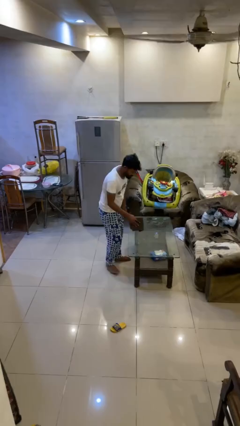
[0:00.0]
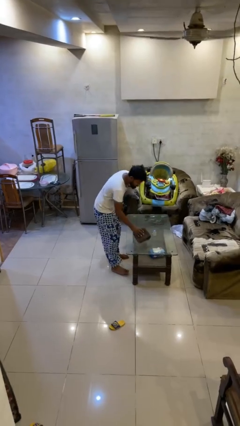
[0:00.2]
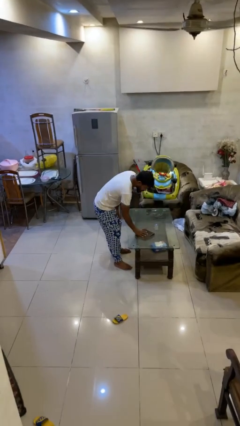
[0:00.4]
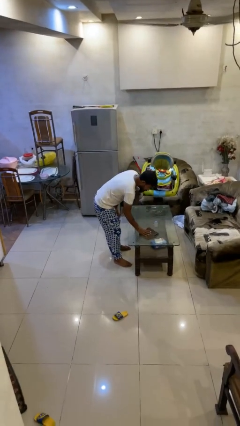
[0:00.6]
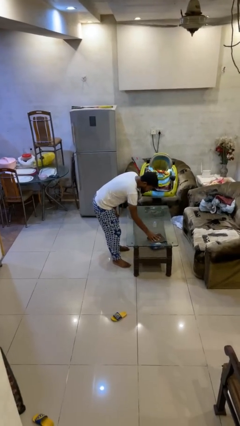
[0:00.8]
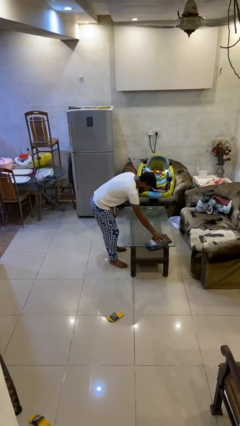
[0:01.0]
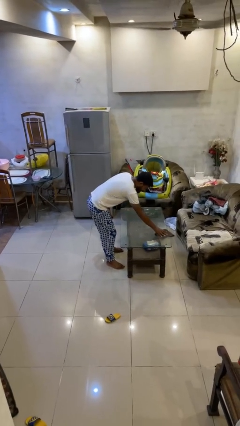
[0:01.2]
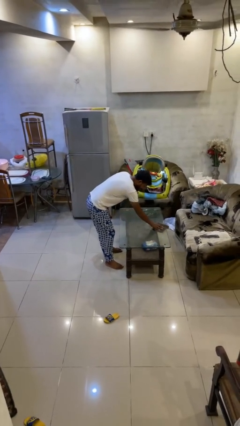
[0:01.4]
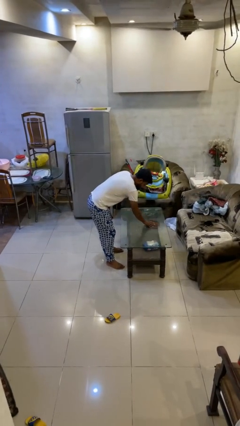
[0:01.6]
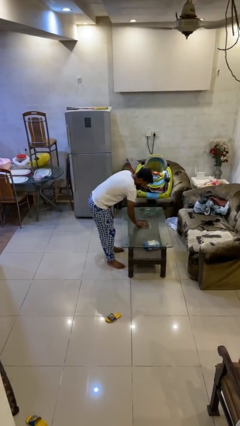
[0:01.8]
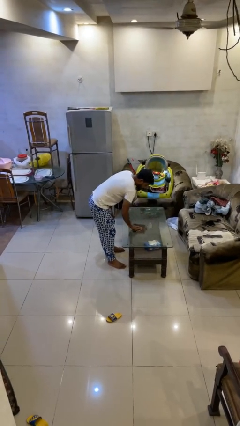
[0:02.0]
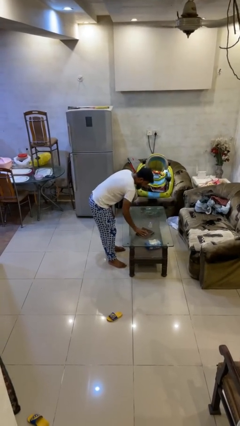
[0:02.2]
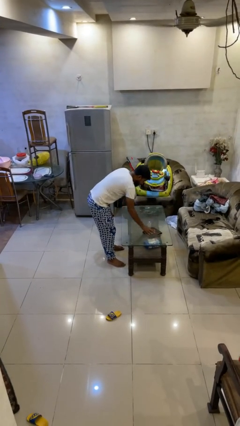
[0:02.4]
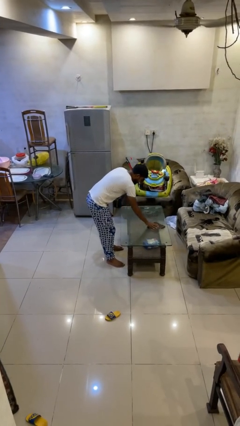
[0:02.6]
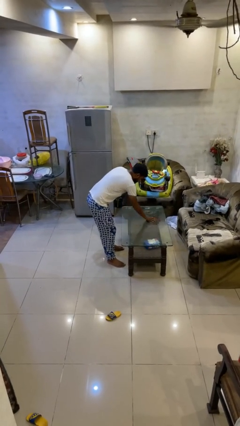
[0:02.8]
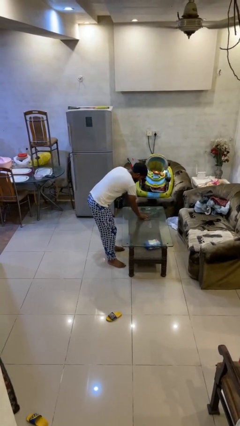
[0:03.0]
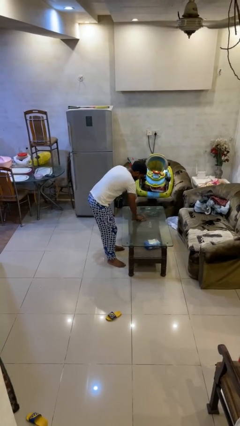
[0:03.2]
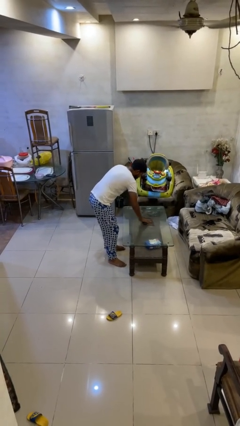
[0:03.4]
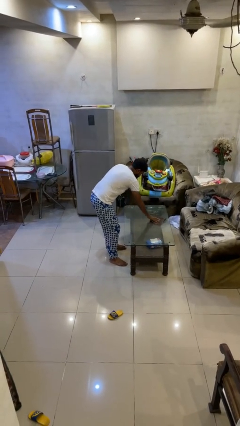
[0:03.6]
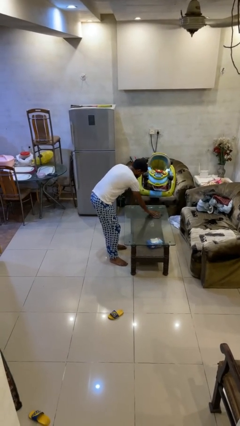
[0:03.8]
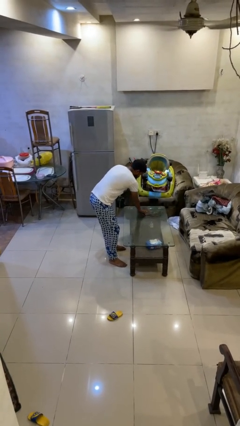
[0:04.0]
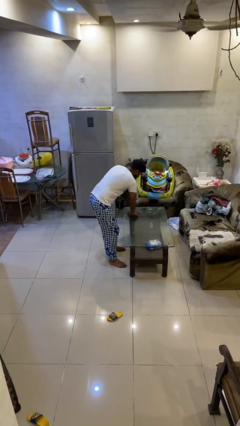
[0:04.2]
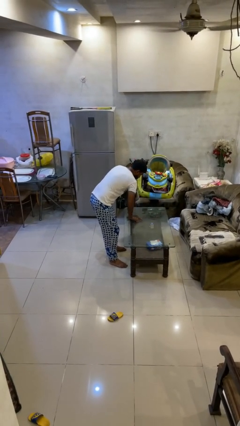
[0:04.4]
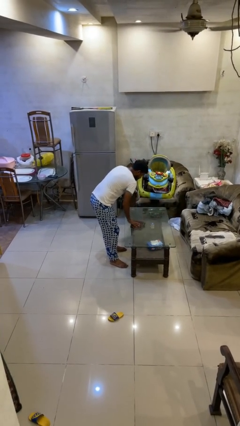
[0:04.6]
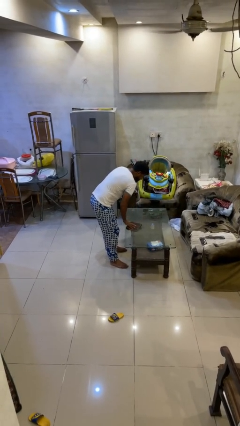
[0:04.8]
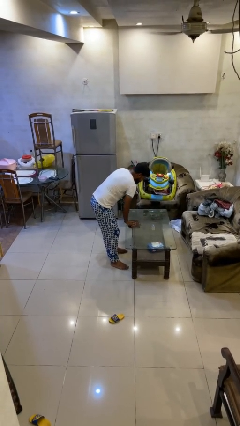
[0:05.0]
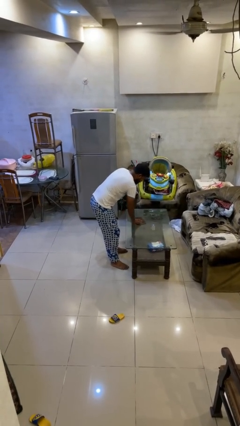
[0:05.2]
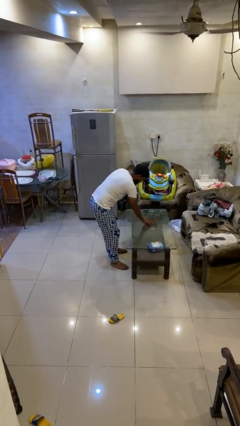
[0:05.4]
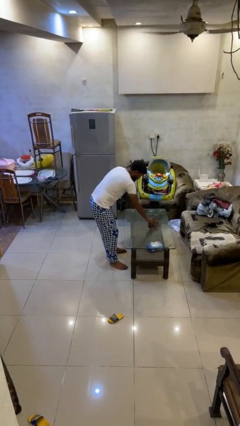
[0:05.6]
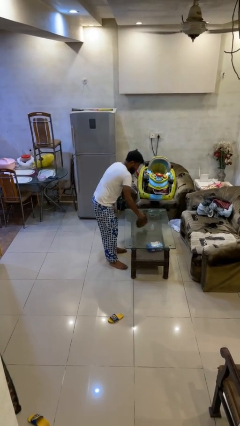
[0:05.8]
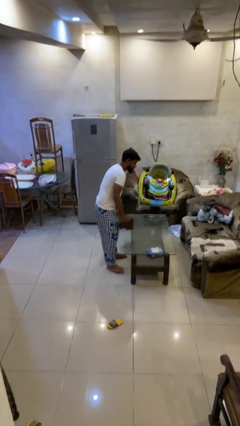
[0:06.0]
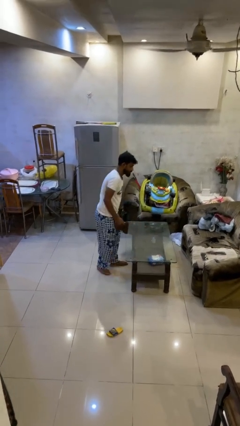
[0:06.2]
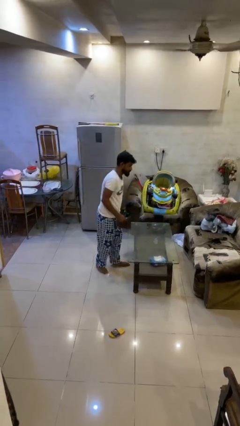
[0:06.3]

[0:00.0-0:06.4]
person cleans table with rag

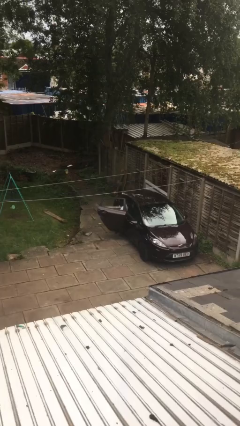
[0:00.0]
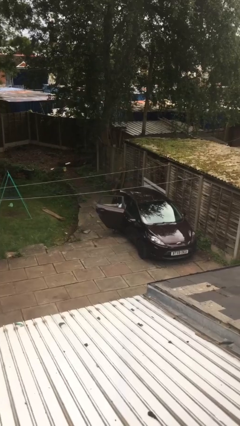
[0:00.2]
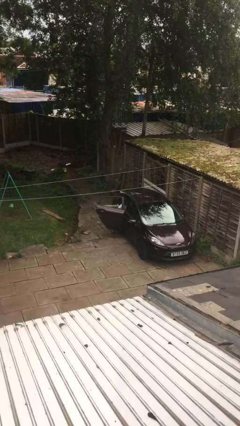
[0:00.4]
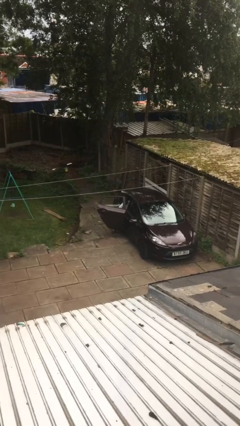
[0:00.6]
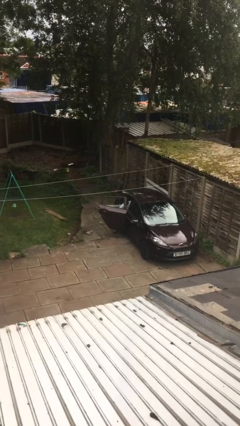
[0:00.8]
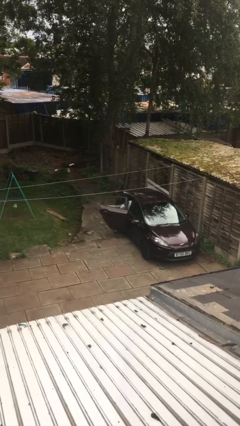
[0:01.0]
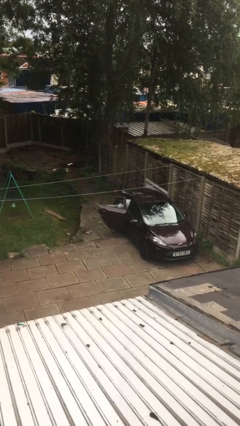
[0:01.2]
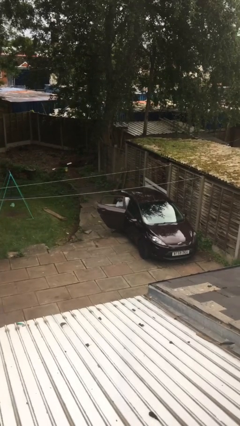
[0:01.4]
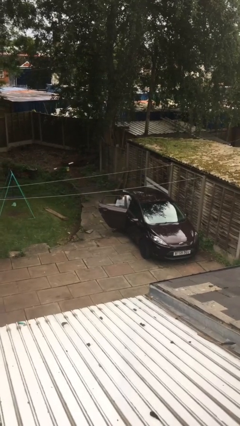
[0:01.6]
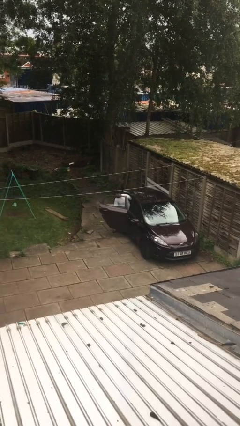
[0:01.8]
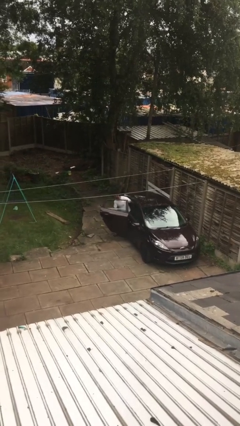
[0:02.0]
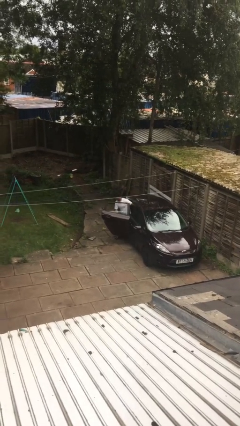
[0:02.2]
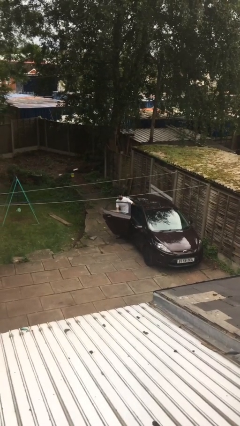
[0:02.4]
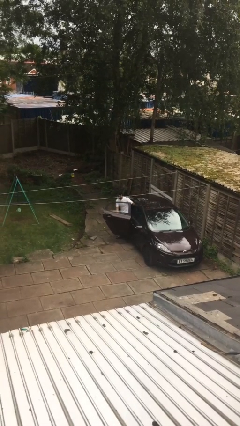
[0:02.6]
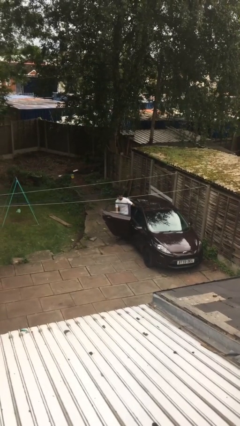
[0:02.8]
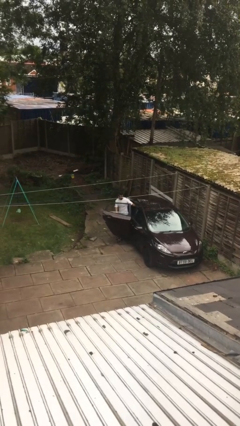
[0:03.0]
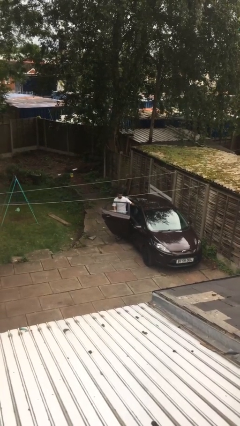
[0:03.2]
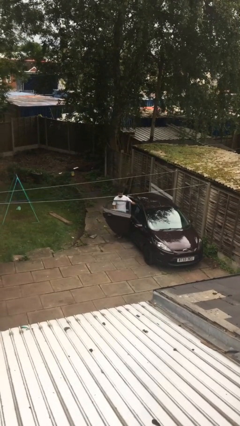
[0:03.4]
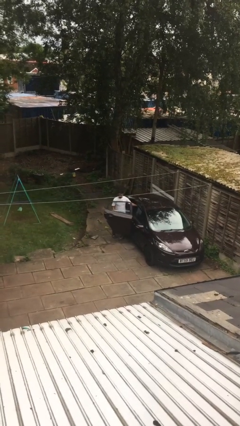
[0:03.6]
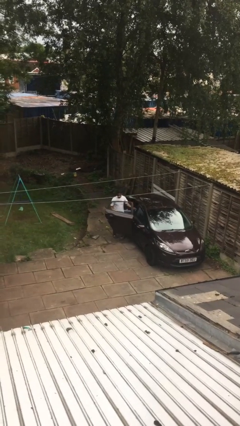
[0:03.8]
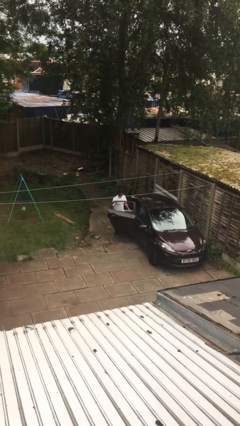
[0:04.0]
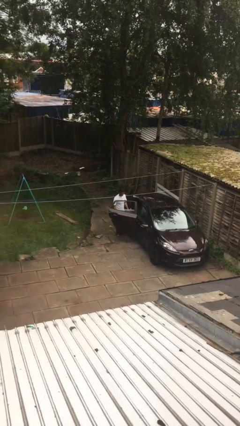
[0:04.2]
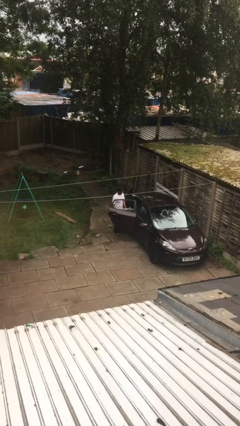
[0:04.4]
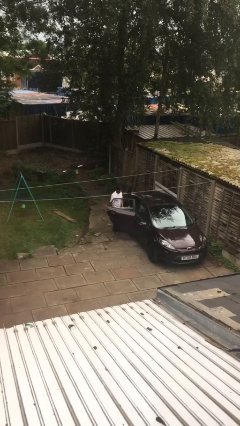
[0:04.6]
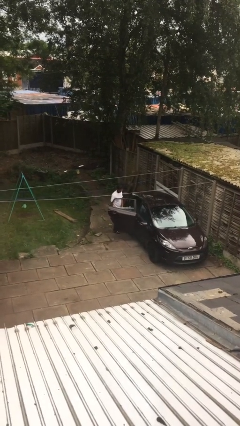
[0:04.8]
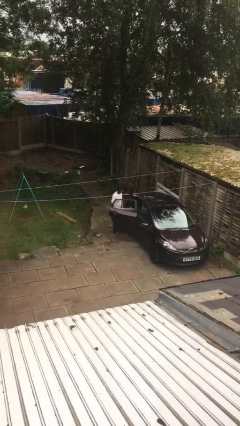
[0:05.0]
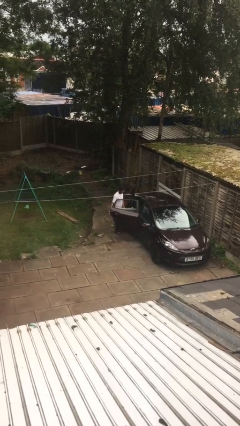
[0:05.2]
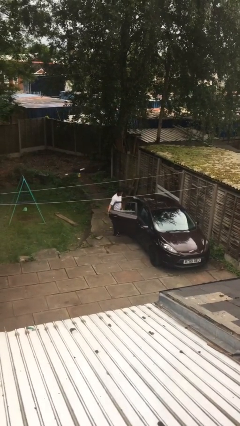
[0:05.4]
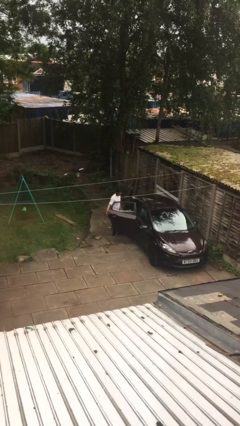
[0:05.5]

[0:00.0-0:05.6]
person exits car

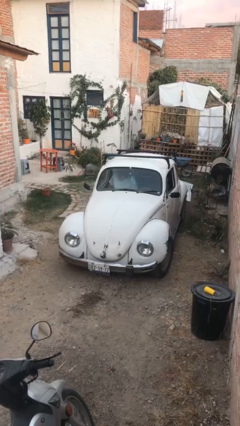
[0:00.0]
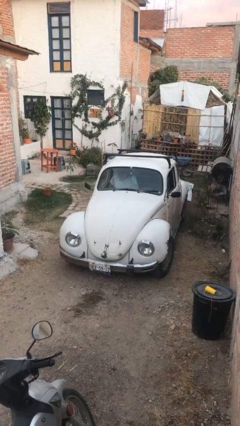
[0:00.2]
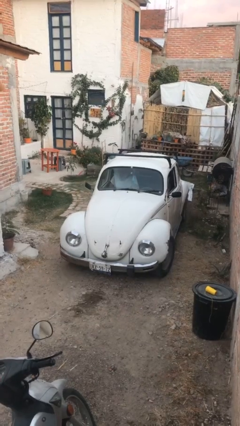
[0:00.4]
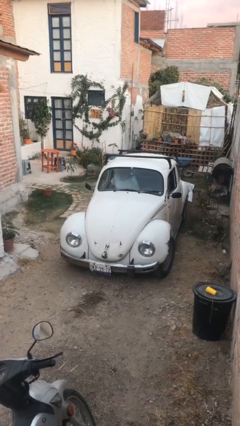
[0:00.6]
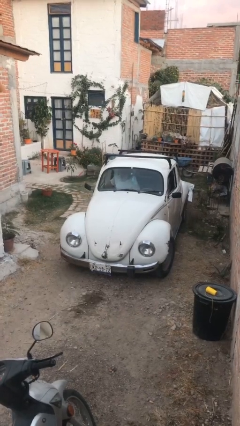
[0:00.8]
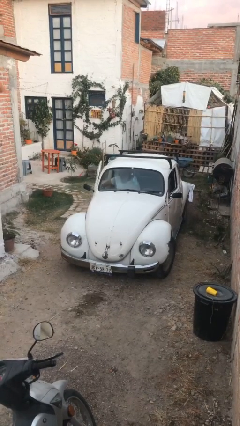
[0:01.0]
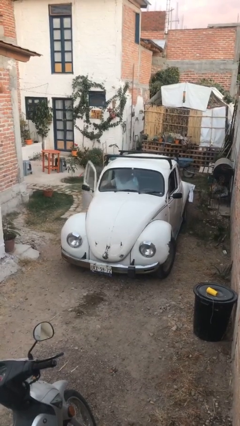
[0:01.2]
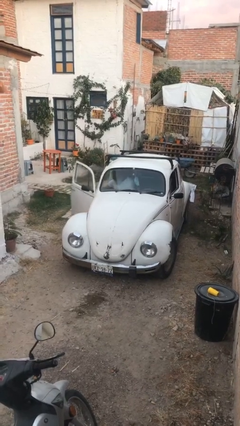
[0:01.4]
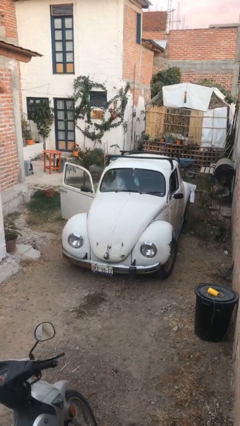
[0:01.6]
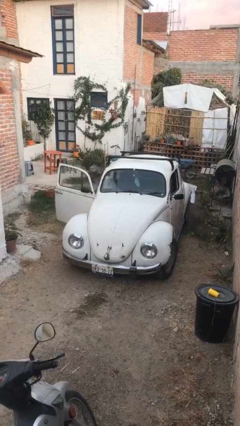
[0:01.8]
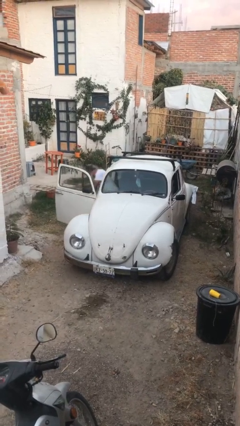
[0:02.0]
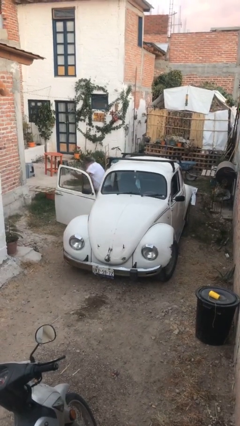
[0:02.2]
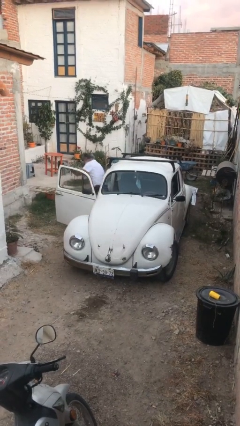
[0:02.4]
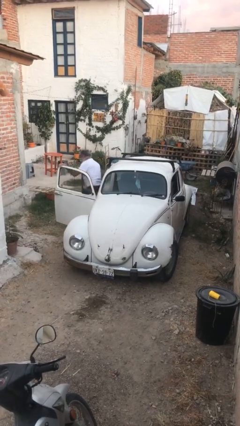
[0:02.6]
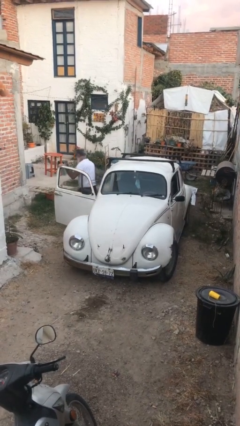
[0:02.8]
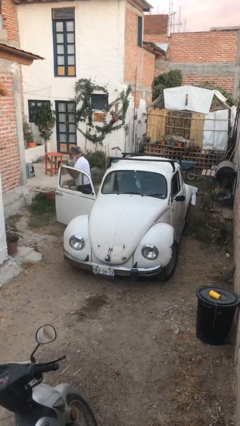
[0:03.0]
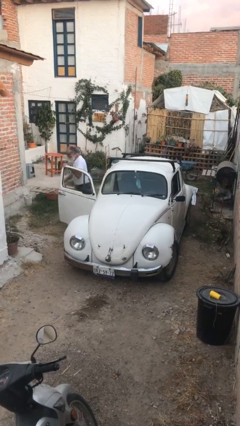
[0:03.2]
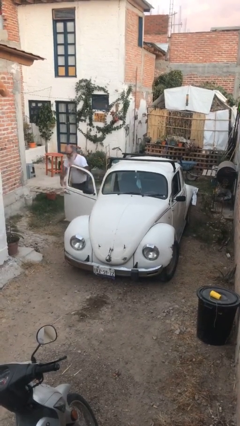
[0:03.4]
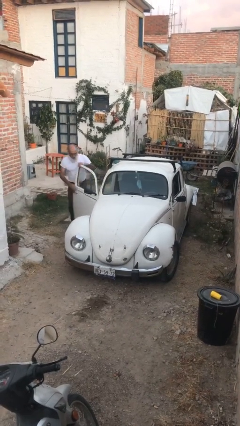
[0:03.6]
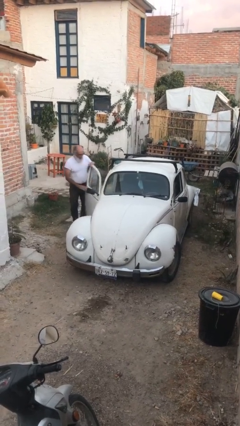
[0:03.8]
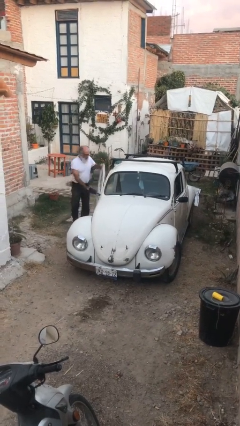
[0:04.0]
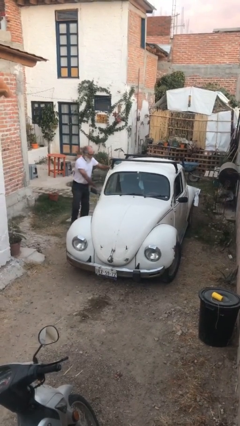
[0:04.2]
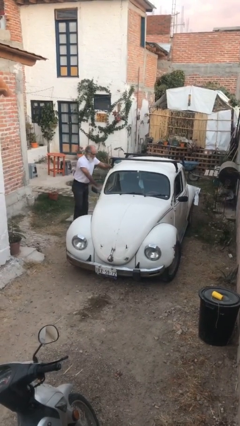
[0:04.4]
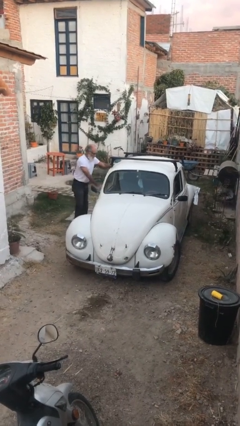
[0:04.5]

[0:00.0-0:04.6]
car drops off person

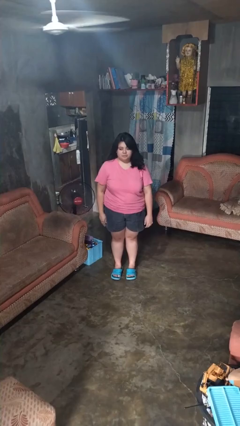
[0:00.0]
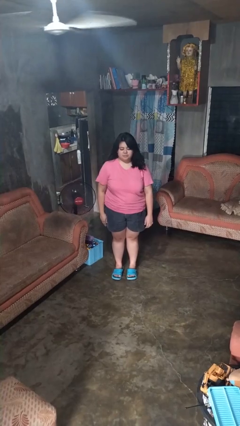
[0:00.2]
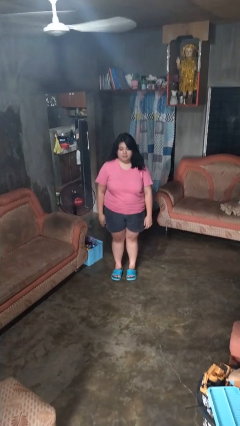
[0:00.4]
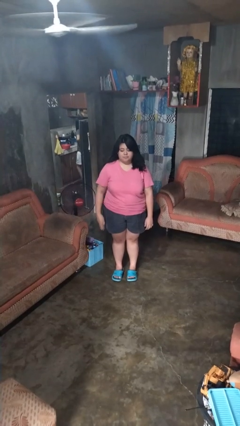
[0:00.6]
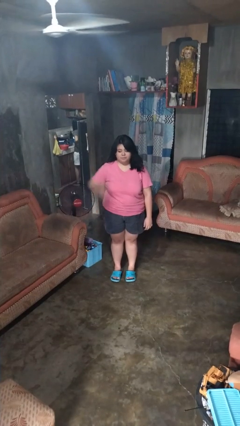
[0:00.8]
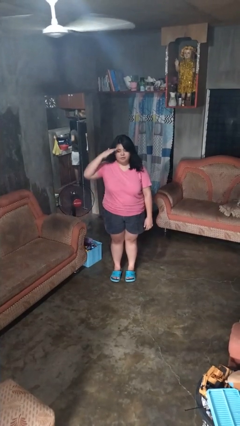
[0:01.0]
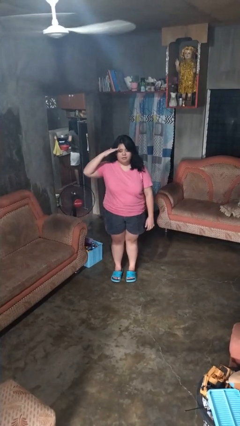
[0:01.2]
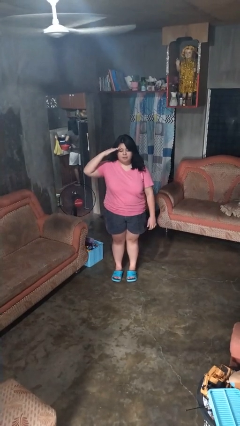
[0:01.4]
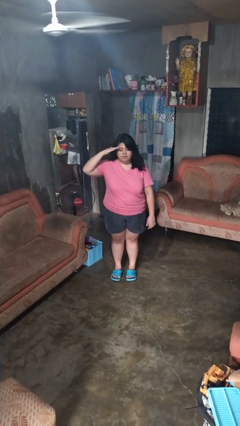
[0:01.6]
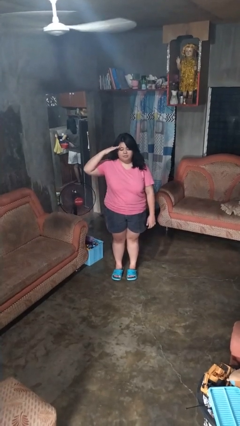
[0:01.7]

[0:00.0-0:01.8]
person salutes
